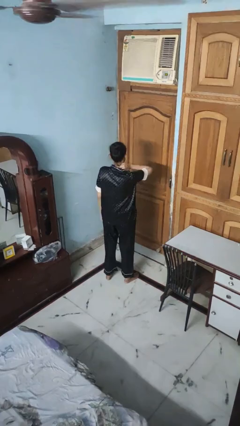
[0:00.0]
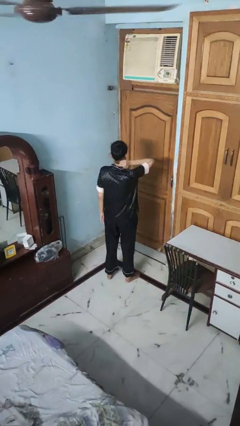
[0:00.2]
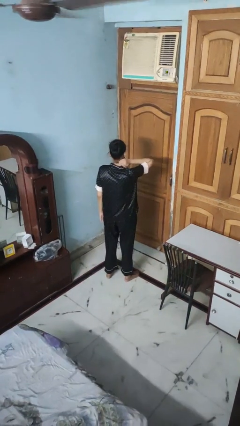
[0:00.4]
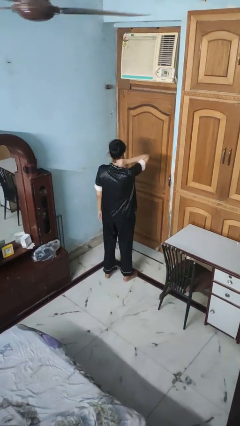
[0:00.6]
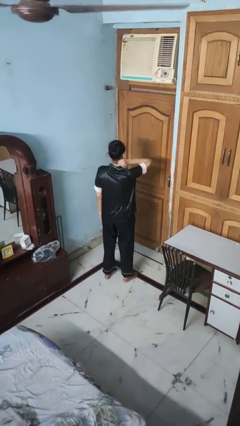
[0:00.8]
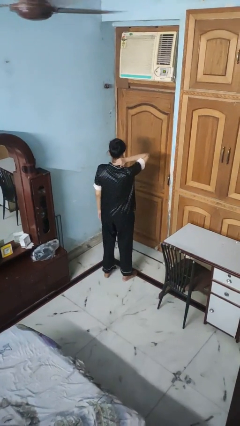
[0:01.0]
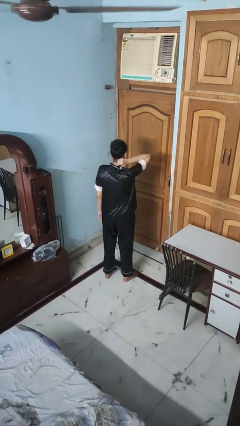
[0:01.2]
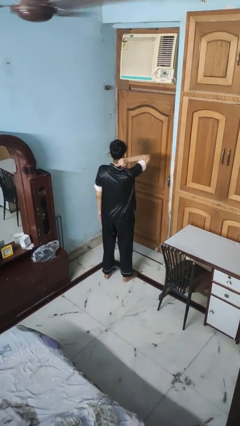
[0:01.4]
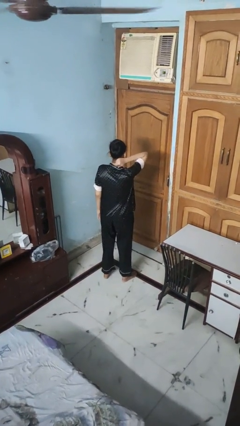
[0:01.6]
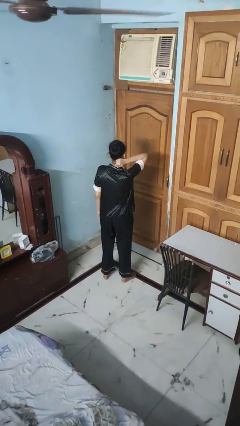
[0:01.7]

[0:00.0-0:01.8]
person rubs neck

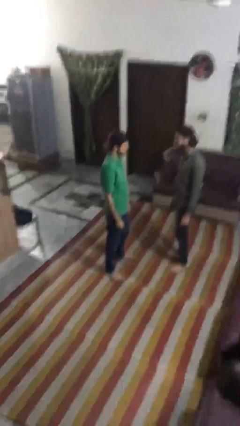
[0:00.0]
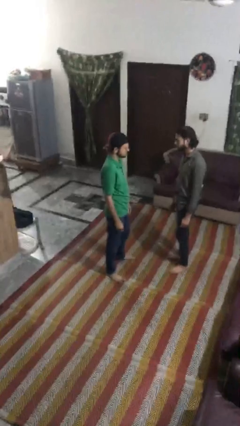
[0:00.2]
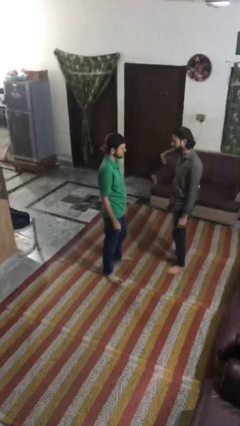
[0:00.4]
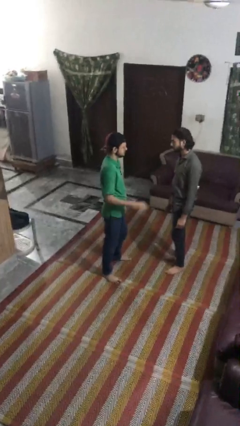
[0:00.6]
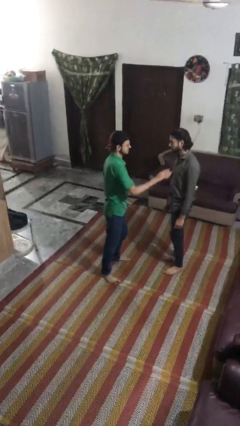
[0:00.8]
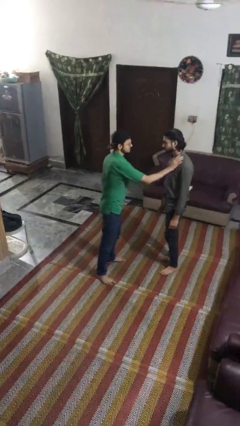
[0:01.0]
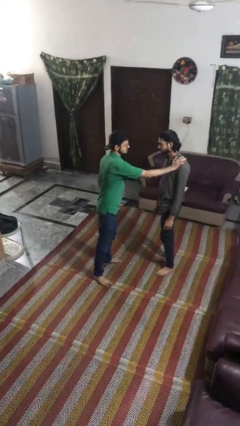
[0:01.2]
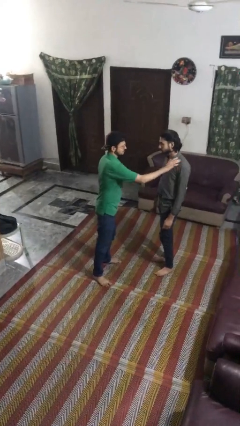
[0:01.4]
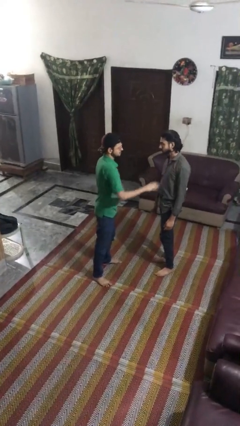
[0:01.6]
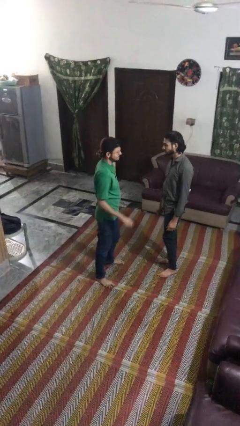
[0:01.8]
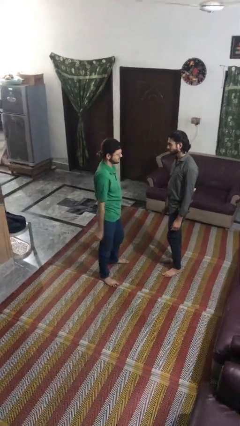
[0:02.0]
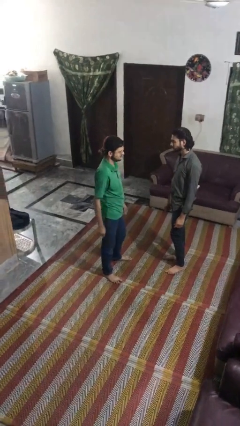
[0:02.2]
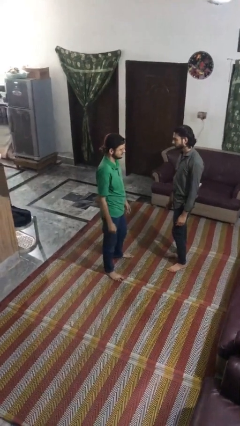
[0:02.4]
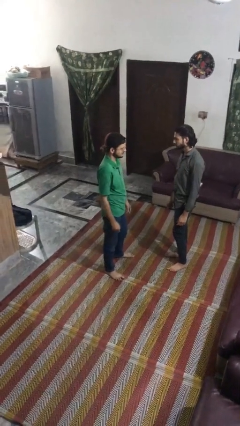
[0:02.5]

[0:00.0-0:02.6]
person shoves person

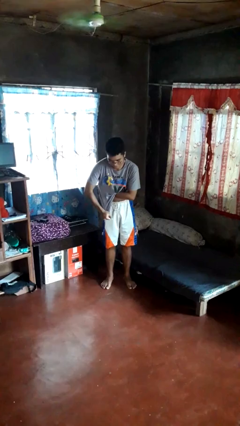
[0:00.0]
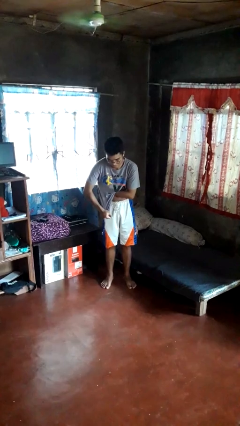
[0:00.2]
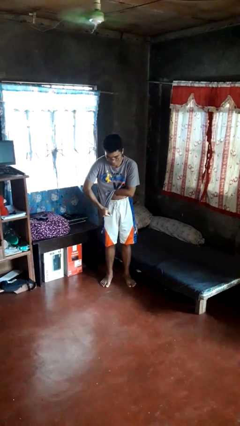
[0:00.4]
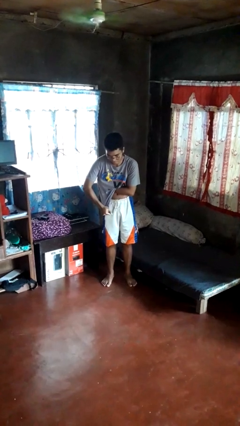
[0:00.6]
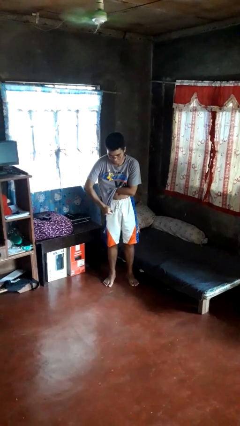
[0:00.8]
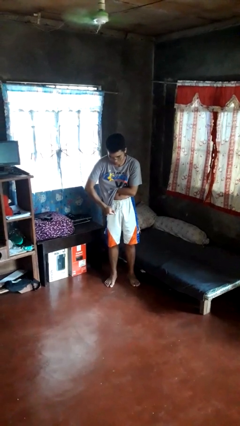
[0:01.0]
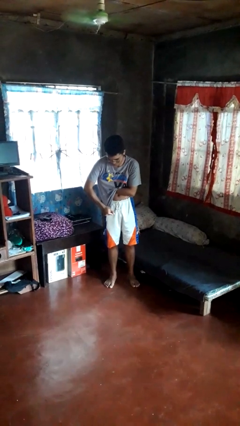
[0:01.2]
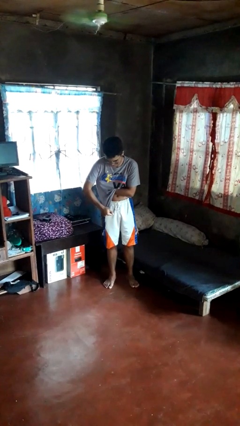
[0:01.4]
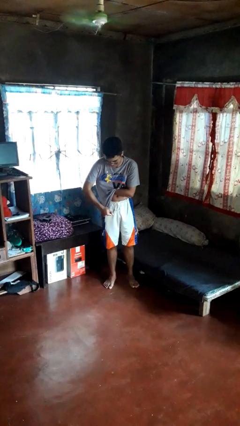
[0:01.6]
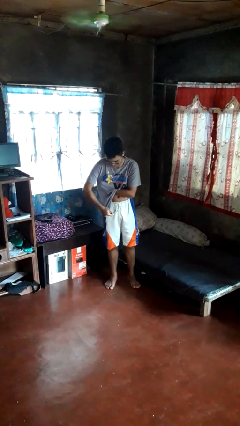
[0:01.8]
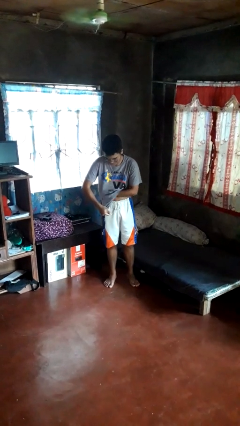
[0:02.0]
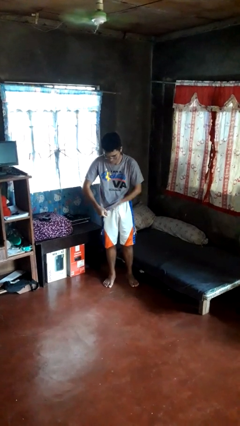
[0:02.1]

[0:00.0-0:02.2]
person applies deodorant

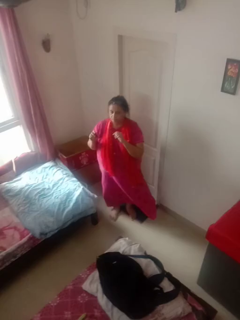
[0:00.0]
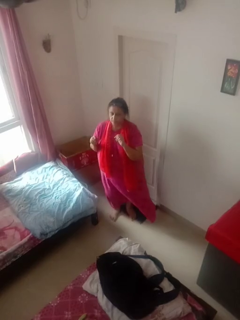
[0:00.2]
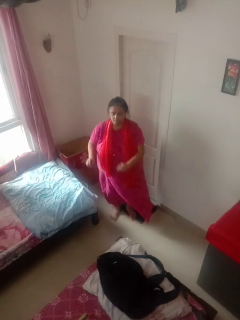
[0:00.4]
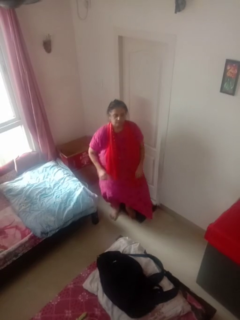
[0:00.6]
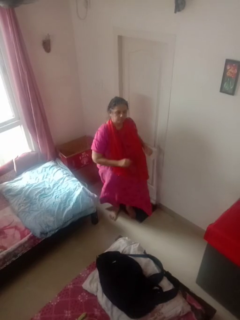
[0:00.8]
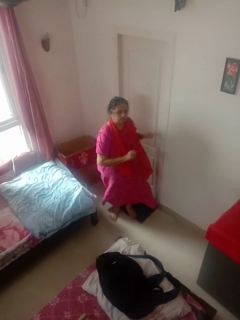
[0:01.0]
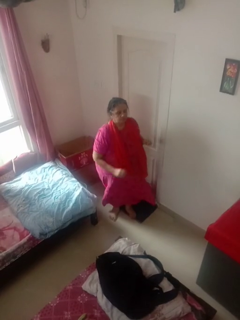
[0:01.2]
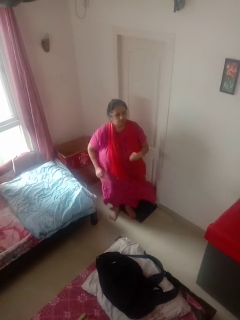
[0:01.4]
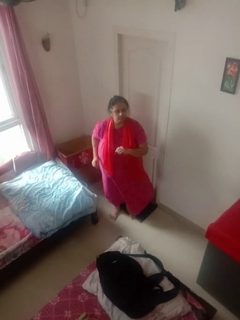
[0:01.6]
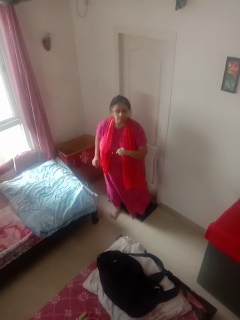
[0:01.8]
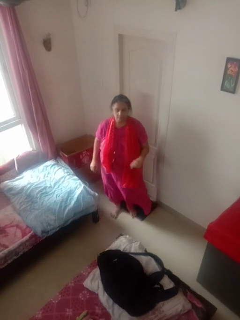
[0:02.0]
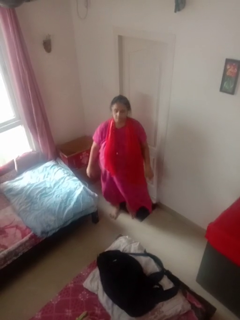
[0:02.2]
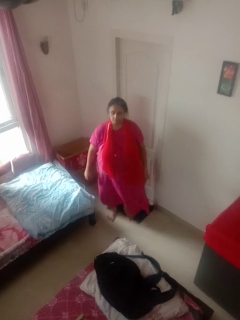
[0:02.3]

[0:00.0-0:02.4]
person dances in place

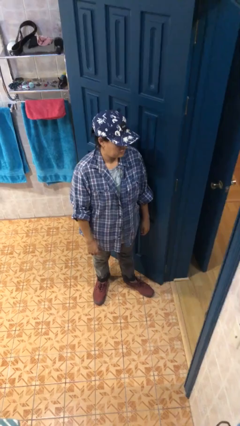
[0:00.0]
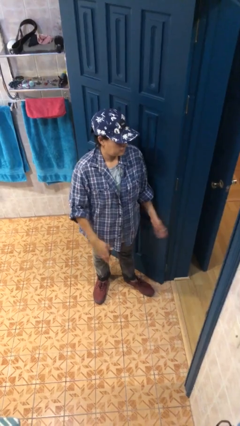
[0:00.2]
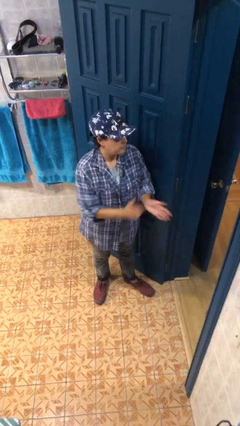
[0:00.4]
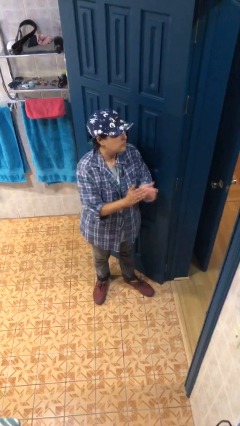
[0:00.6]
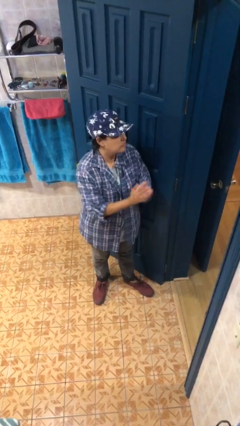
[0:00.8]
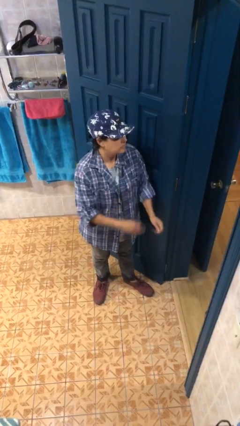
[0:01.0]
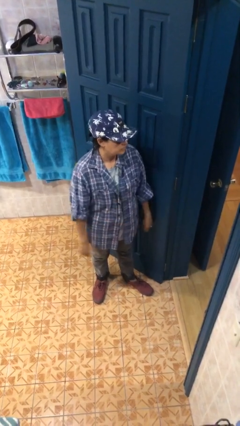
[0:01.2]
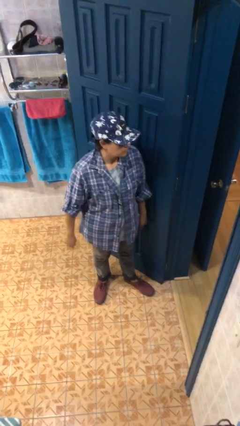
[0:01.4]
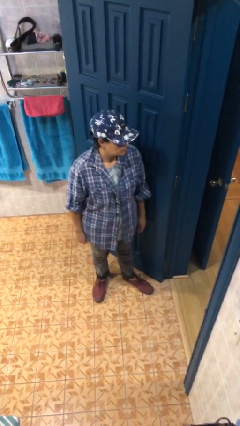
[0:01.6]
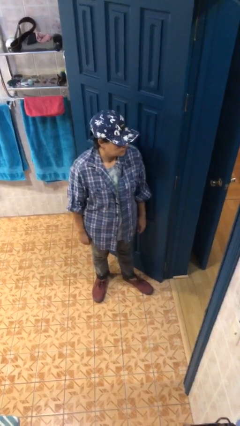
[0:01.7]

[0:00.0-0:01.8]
person claps hands

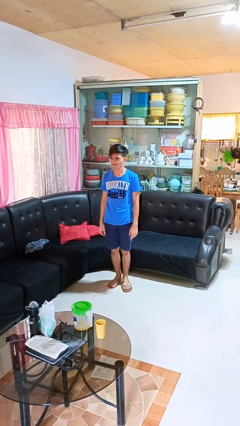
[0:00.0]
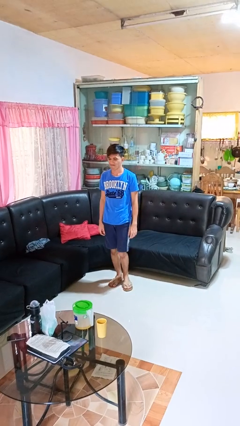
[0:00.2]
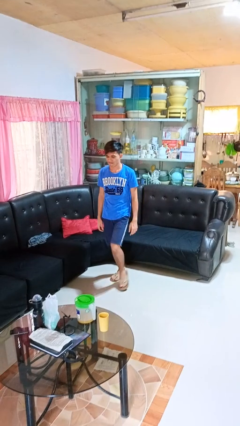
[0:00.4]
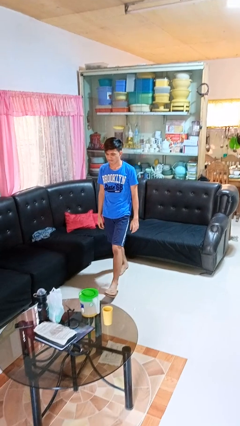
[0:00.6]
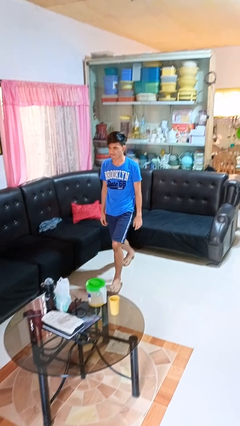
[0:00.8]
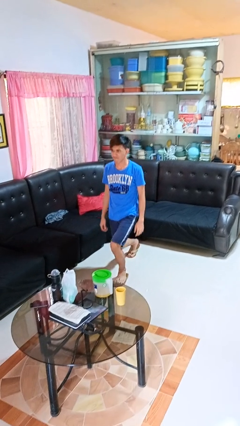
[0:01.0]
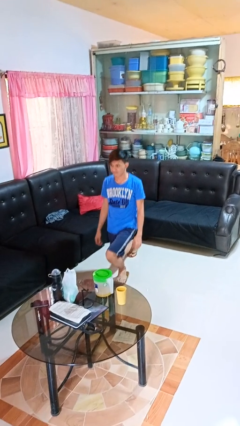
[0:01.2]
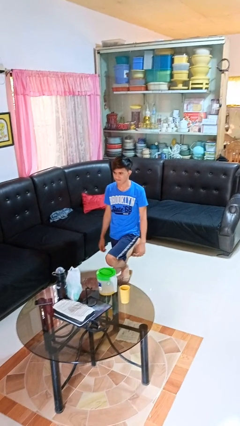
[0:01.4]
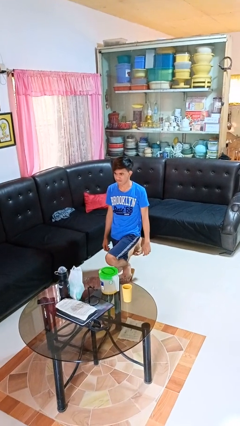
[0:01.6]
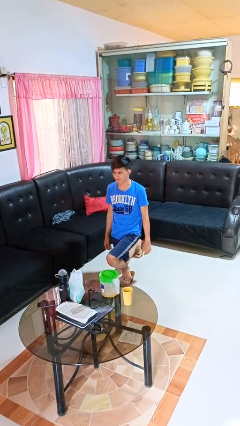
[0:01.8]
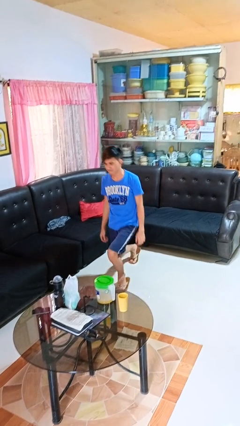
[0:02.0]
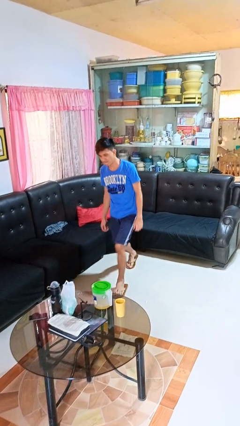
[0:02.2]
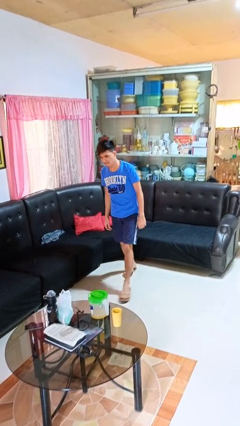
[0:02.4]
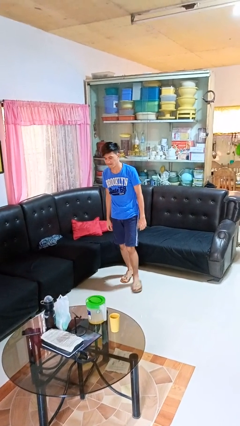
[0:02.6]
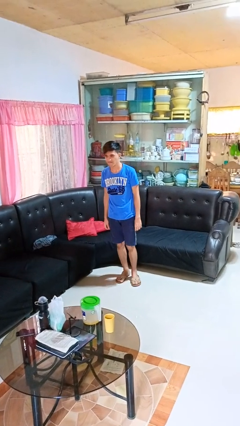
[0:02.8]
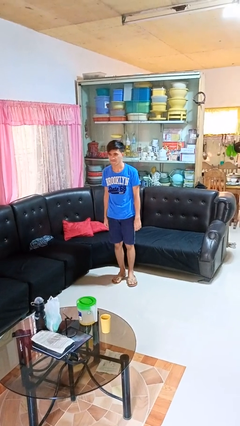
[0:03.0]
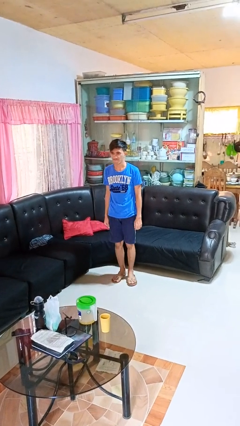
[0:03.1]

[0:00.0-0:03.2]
person exercises with lunges

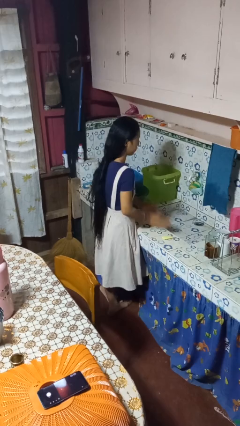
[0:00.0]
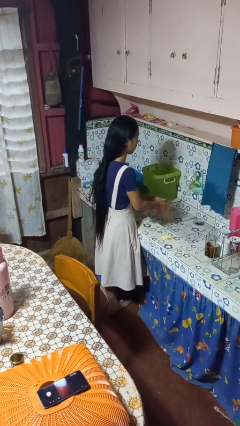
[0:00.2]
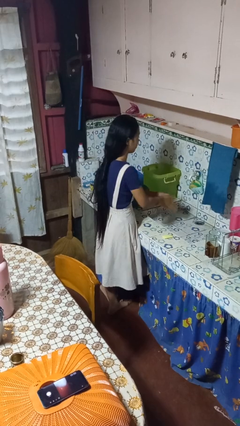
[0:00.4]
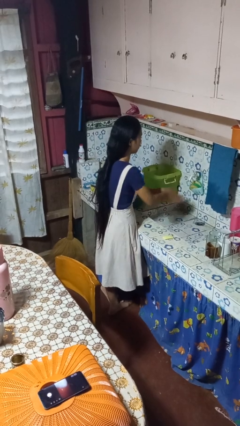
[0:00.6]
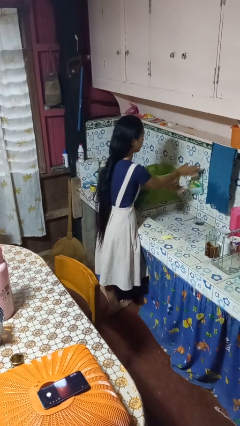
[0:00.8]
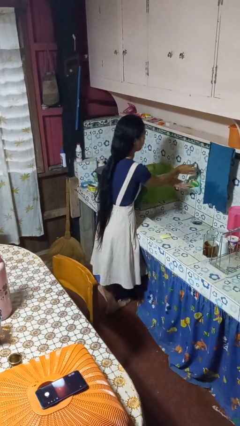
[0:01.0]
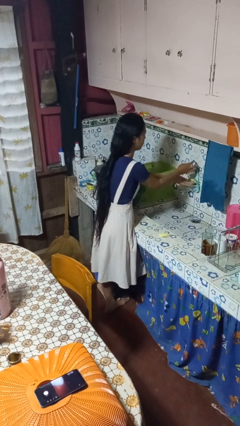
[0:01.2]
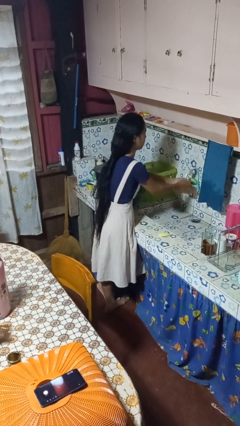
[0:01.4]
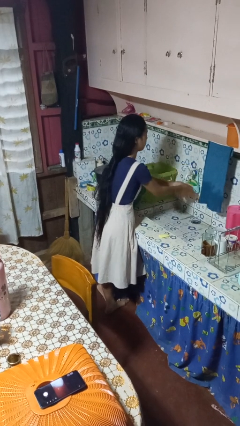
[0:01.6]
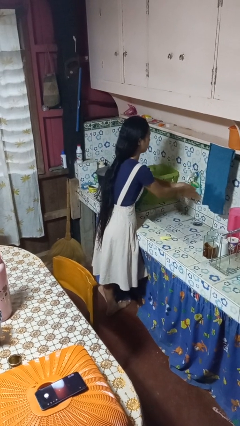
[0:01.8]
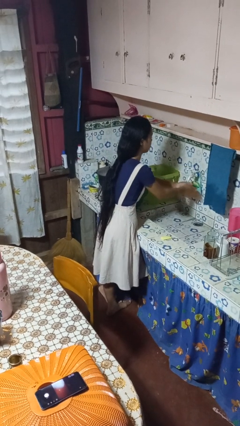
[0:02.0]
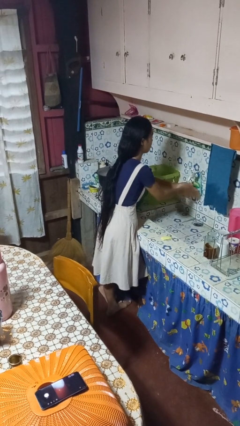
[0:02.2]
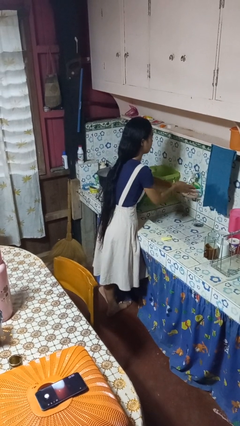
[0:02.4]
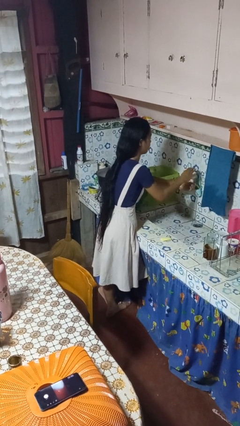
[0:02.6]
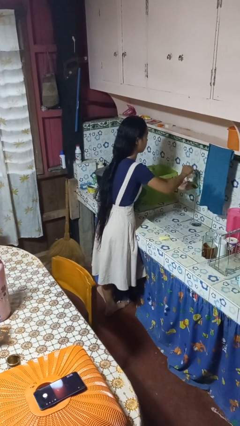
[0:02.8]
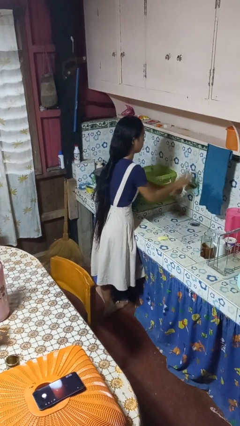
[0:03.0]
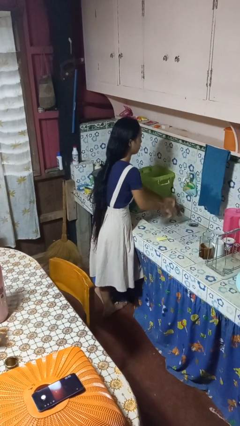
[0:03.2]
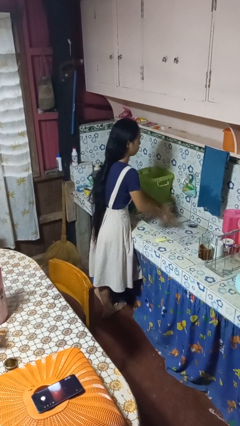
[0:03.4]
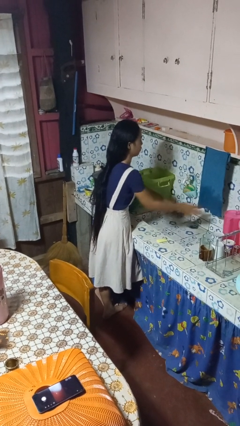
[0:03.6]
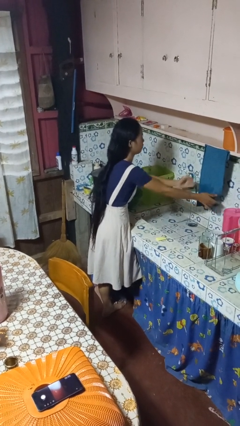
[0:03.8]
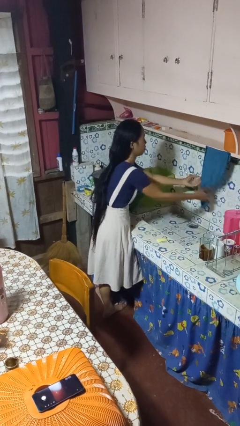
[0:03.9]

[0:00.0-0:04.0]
person washes hands
